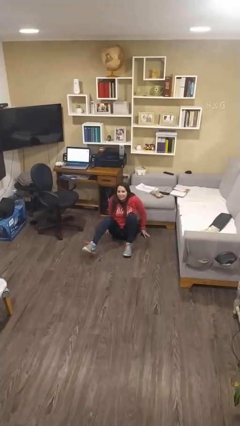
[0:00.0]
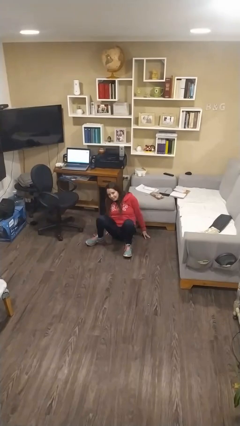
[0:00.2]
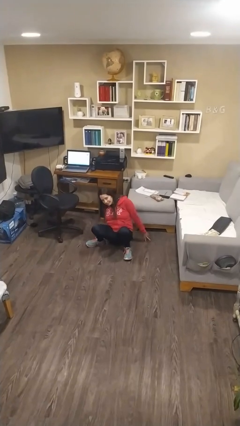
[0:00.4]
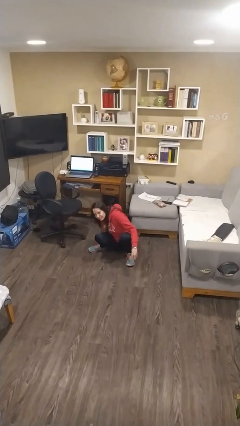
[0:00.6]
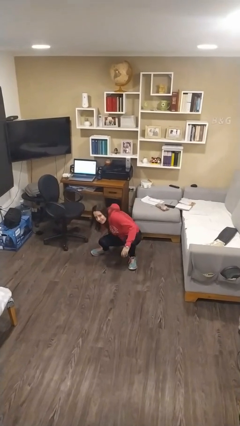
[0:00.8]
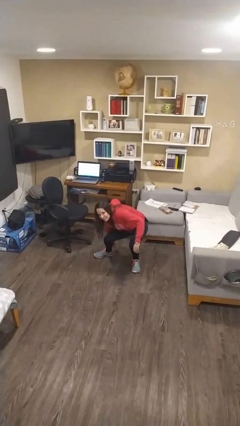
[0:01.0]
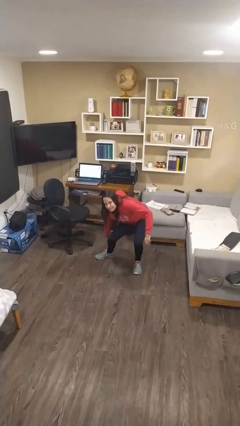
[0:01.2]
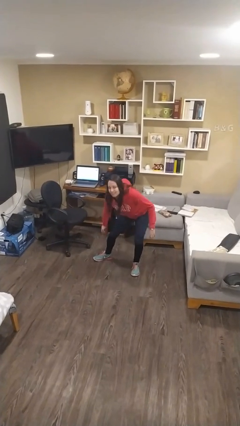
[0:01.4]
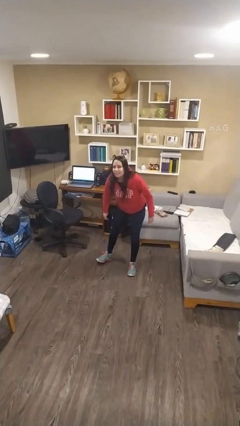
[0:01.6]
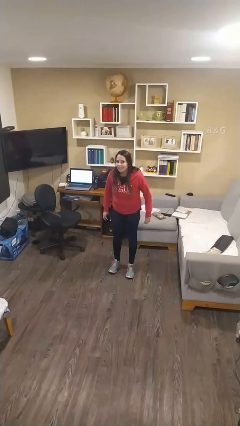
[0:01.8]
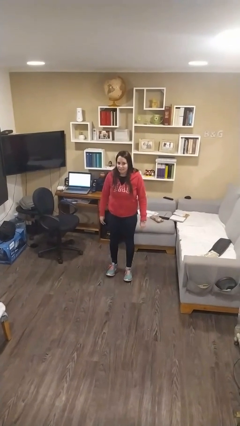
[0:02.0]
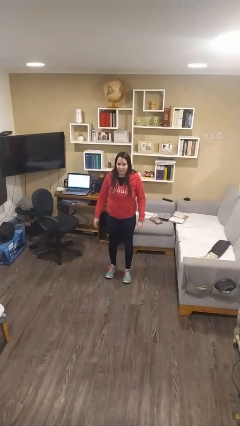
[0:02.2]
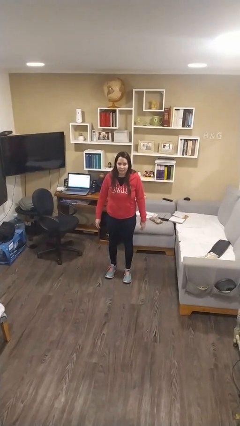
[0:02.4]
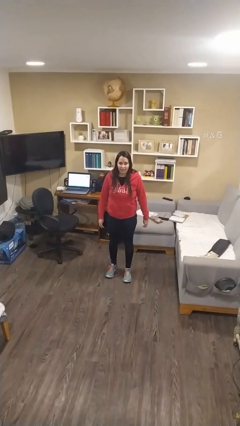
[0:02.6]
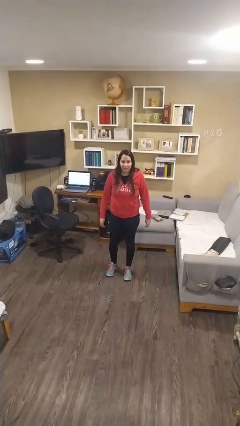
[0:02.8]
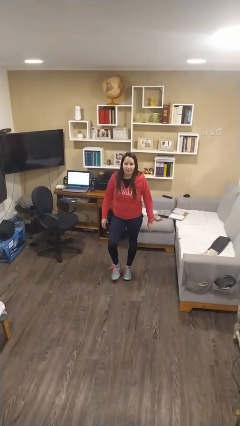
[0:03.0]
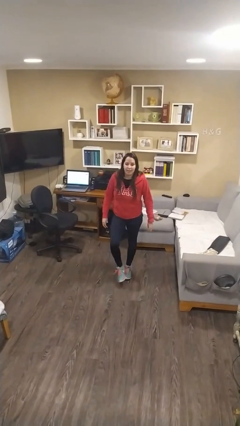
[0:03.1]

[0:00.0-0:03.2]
person stands up from floor

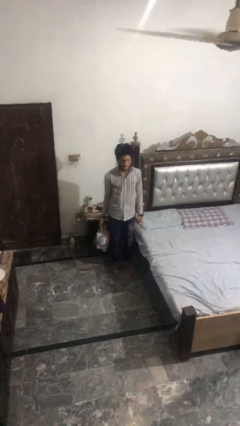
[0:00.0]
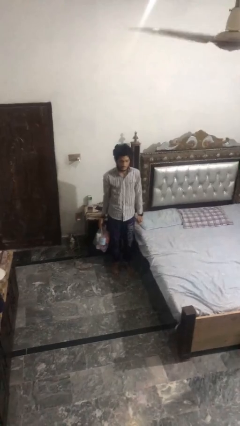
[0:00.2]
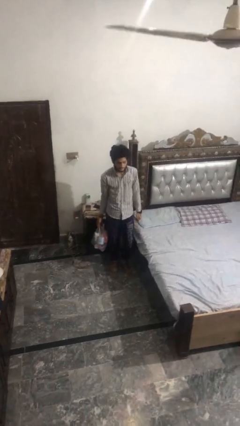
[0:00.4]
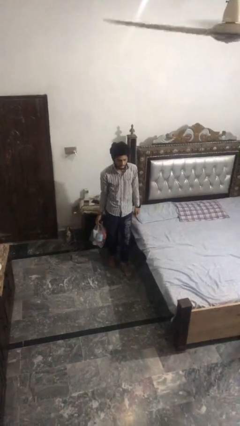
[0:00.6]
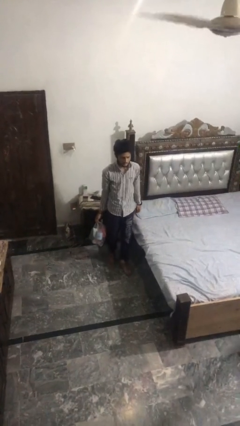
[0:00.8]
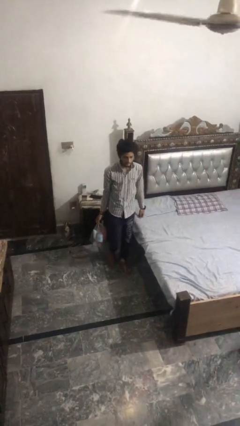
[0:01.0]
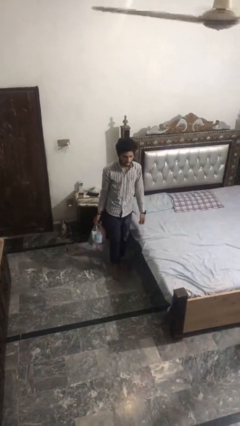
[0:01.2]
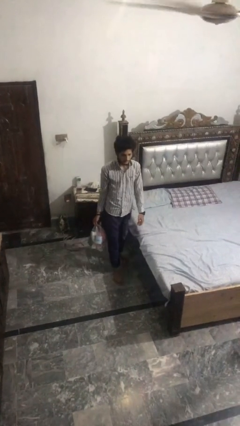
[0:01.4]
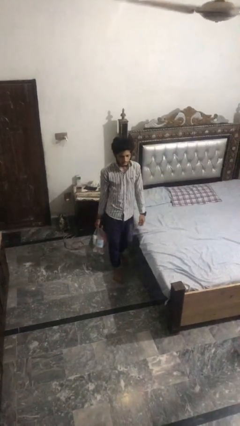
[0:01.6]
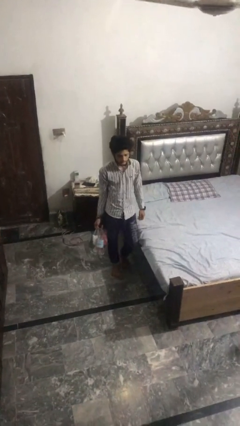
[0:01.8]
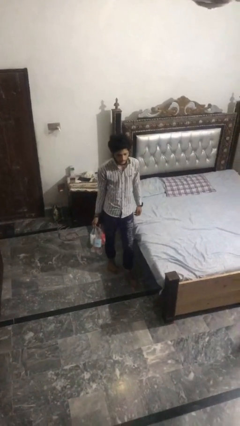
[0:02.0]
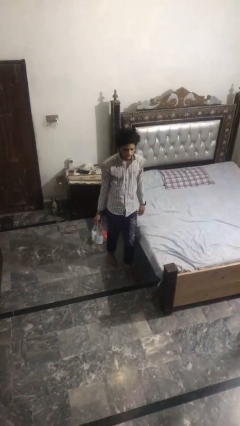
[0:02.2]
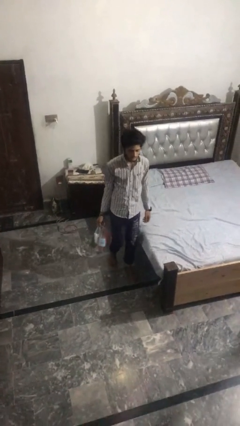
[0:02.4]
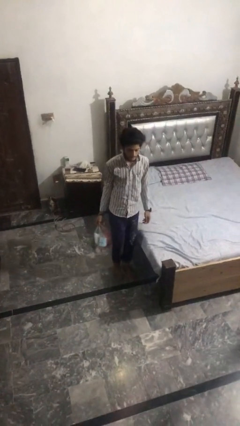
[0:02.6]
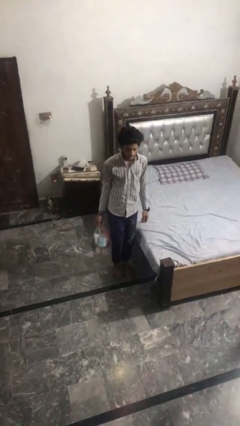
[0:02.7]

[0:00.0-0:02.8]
person carries groceries

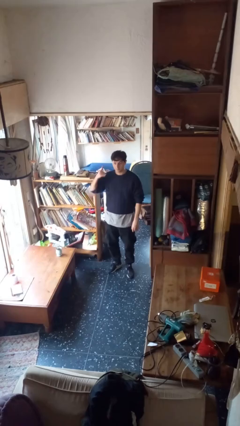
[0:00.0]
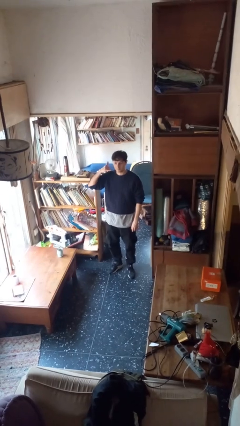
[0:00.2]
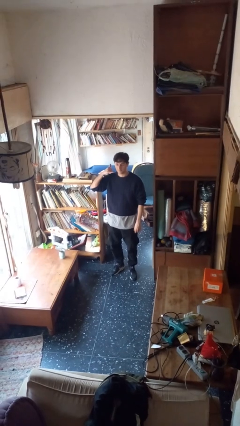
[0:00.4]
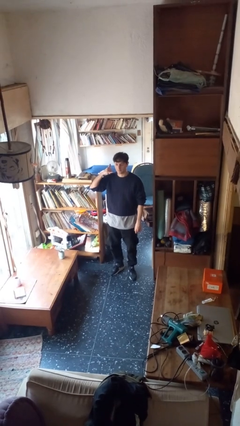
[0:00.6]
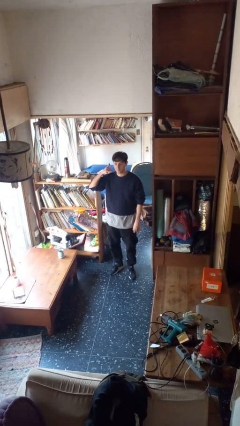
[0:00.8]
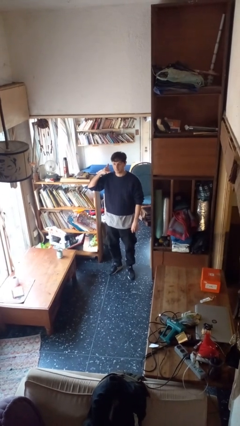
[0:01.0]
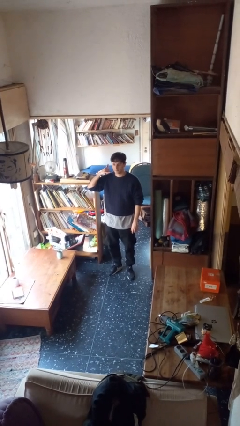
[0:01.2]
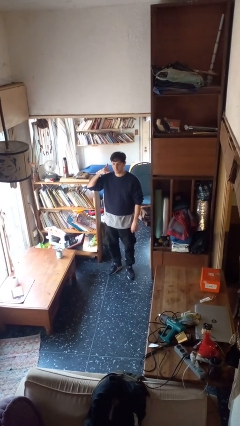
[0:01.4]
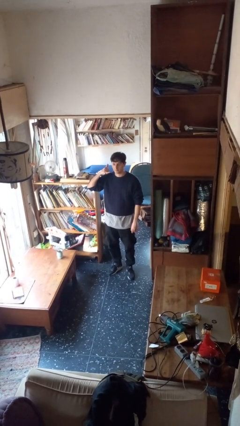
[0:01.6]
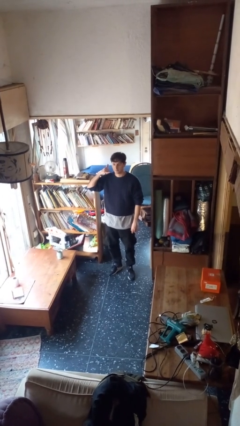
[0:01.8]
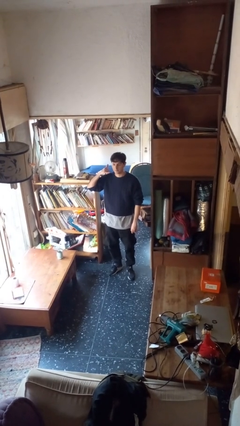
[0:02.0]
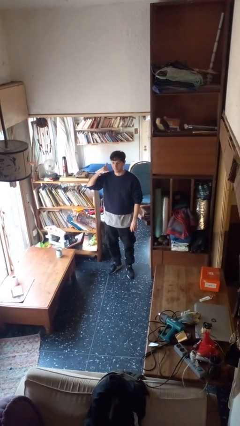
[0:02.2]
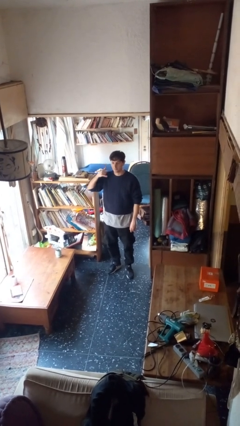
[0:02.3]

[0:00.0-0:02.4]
person gestures call me

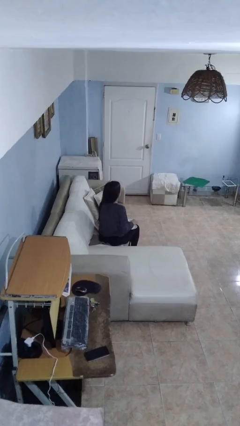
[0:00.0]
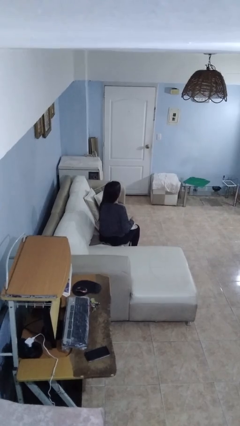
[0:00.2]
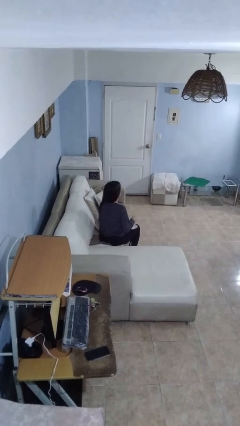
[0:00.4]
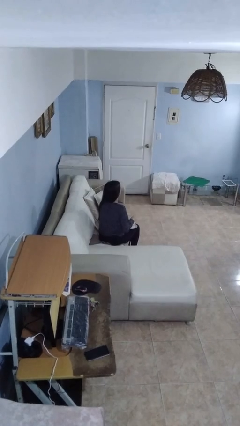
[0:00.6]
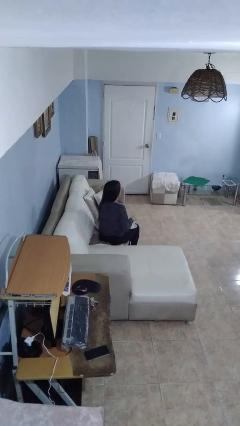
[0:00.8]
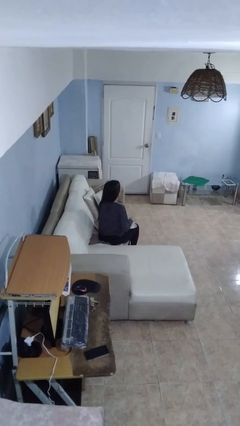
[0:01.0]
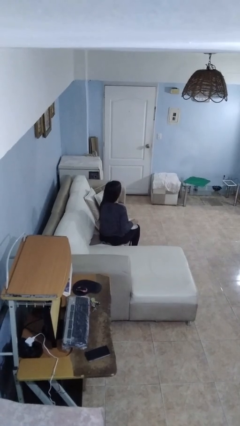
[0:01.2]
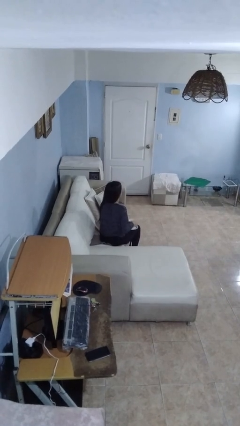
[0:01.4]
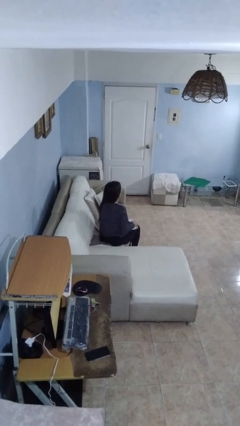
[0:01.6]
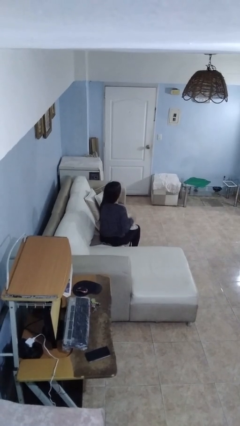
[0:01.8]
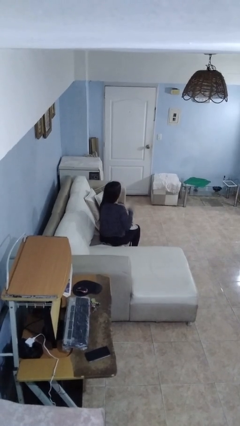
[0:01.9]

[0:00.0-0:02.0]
person stirs mug

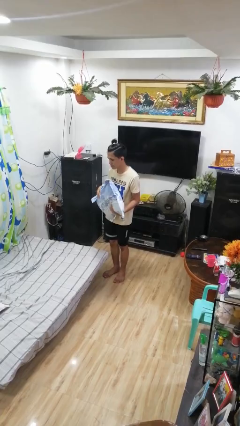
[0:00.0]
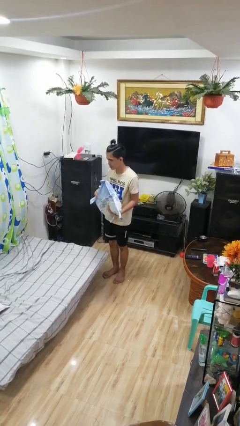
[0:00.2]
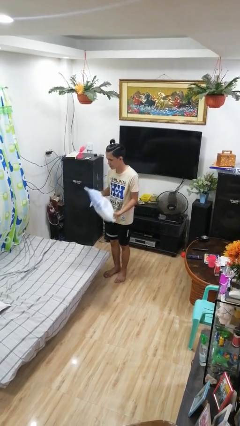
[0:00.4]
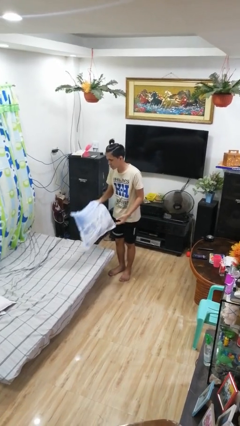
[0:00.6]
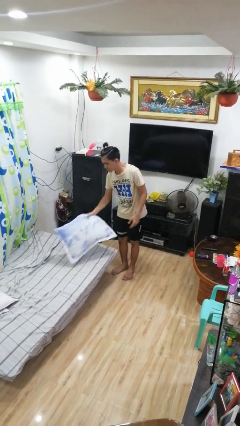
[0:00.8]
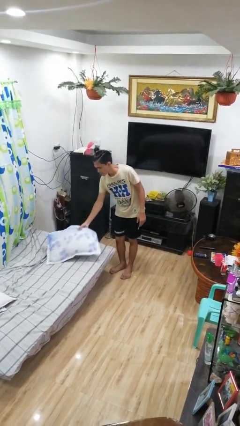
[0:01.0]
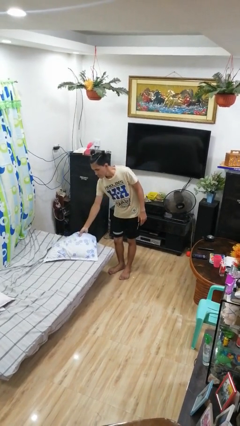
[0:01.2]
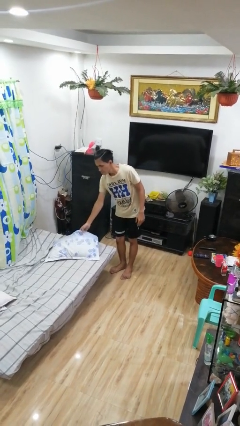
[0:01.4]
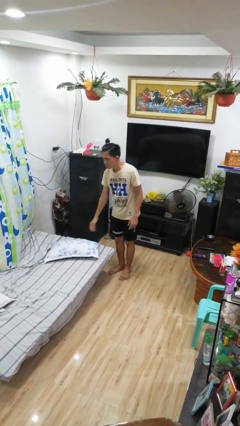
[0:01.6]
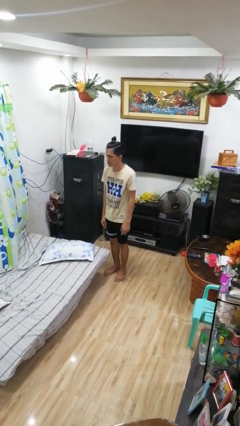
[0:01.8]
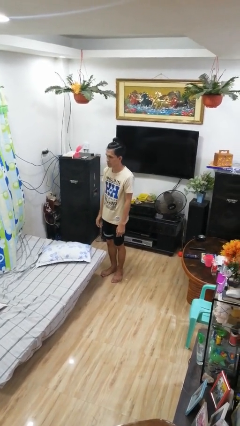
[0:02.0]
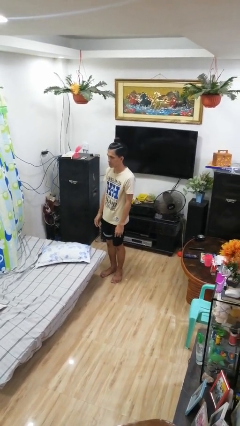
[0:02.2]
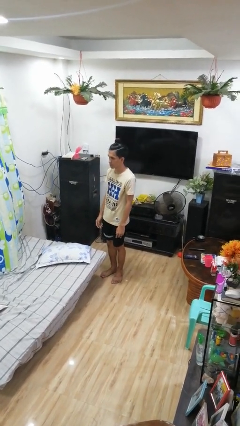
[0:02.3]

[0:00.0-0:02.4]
person puts down object on bed

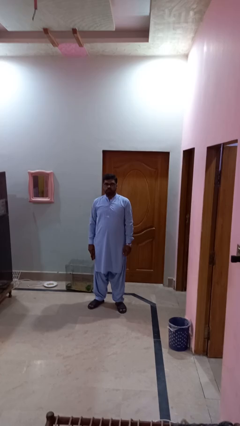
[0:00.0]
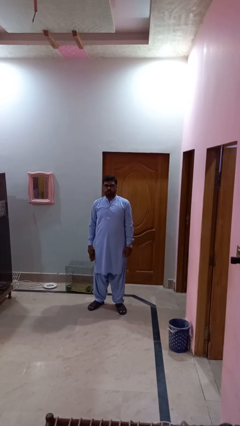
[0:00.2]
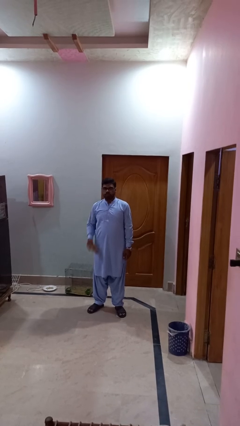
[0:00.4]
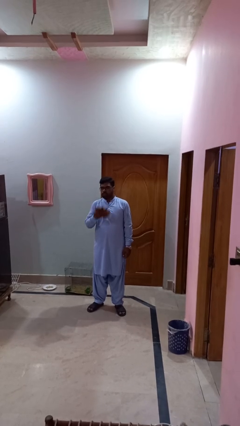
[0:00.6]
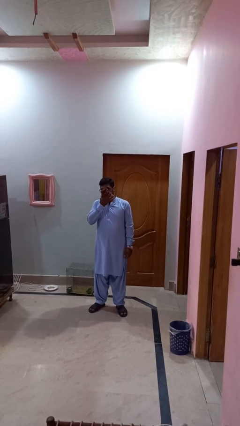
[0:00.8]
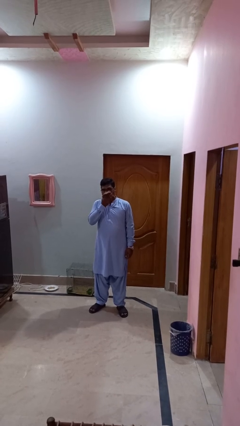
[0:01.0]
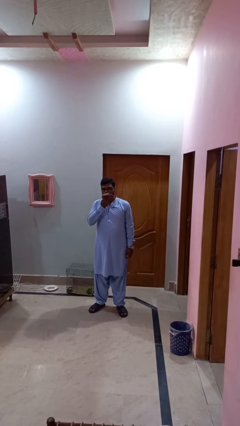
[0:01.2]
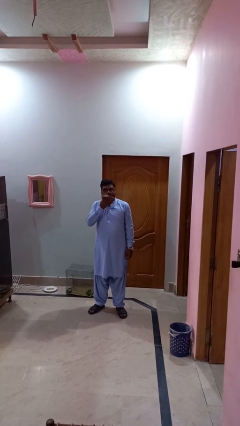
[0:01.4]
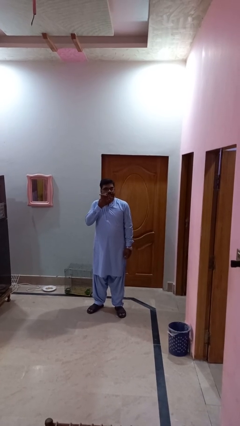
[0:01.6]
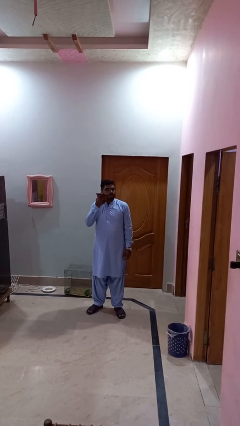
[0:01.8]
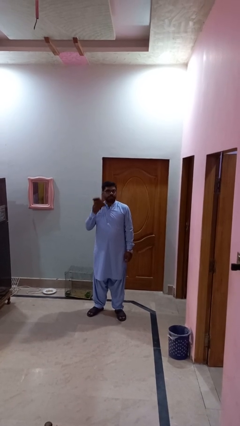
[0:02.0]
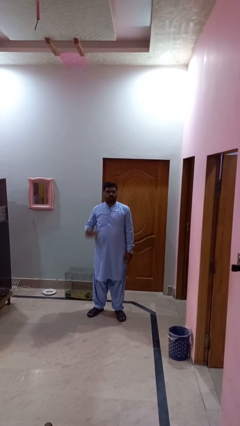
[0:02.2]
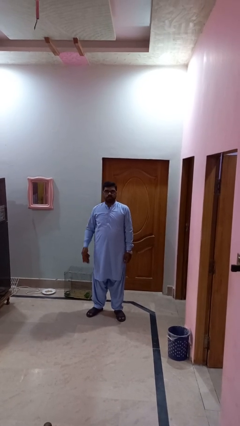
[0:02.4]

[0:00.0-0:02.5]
person wipes mouth with napkin

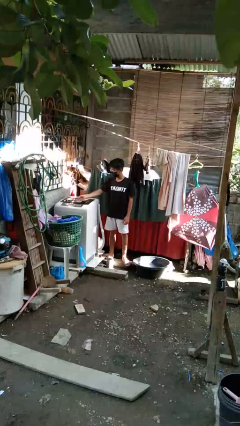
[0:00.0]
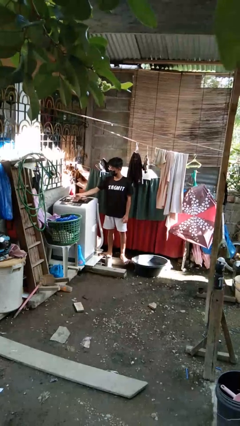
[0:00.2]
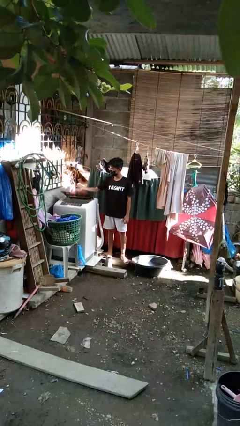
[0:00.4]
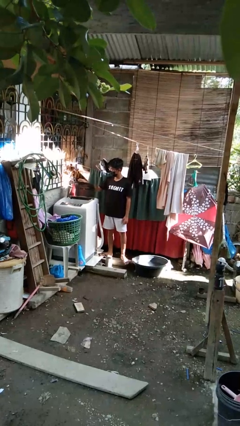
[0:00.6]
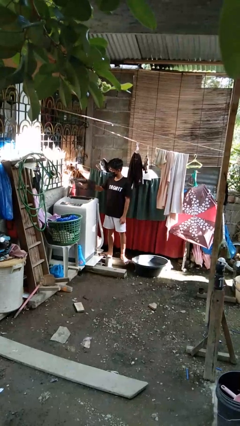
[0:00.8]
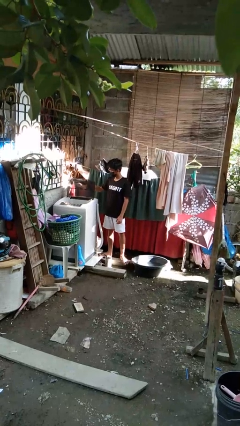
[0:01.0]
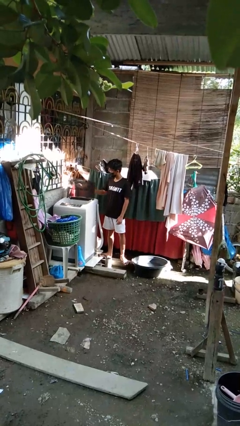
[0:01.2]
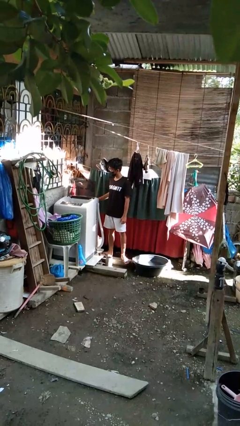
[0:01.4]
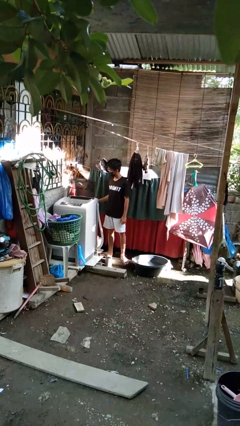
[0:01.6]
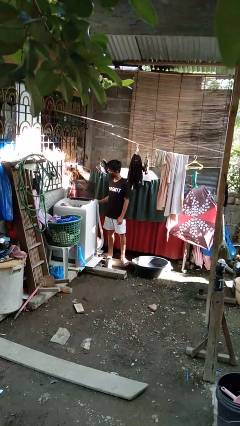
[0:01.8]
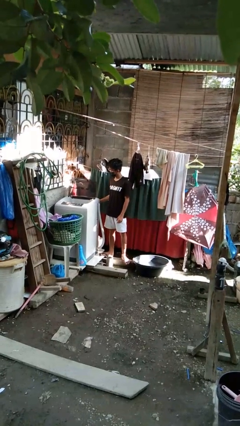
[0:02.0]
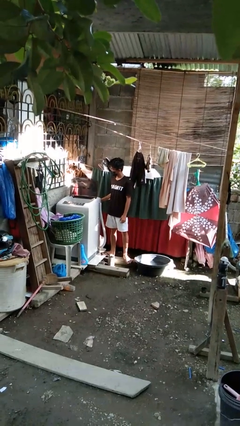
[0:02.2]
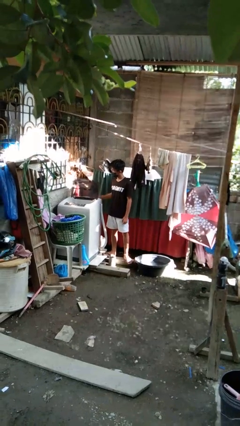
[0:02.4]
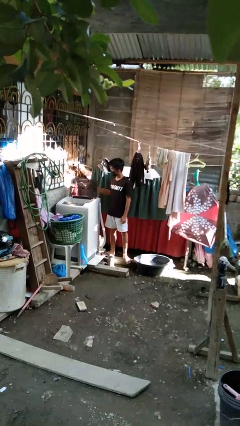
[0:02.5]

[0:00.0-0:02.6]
person opens clothes washer
